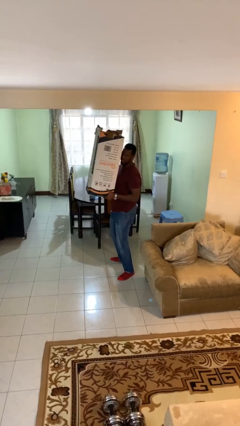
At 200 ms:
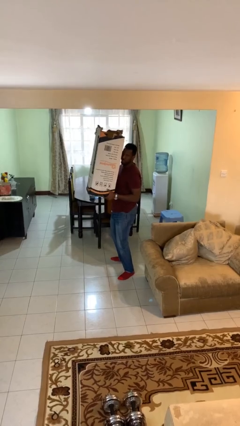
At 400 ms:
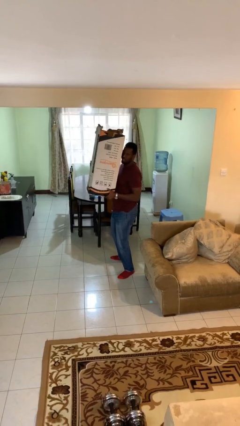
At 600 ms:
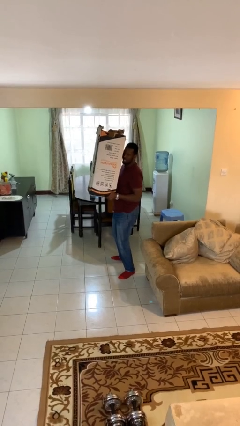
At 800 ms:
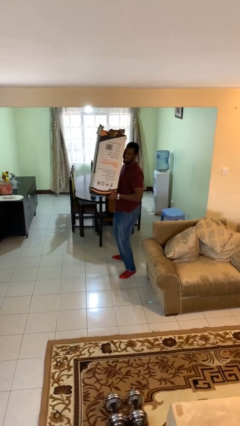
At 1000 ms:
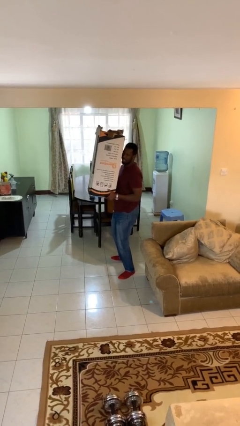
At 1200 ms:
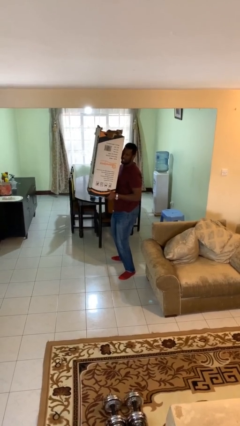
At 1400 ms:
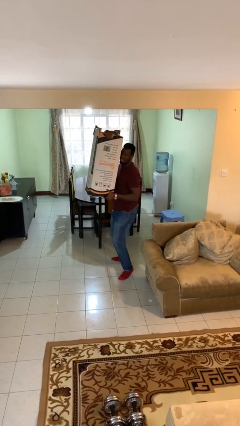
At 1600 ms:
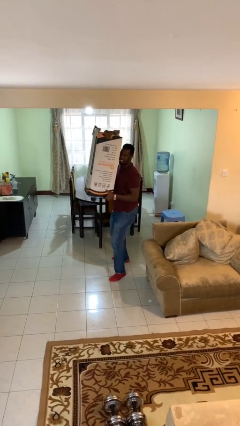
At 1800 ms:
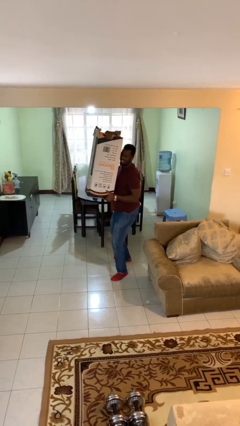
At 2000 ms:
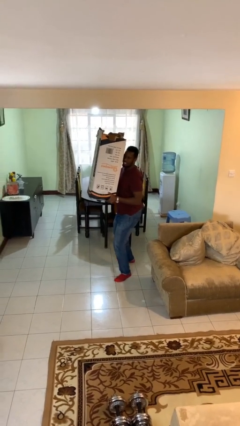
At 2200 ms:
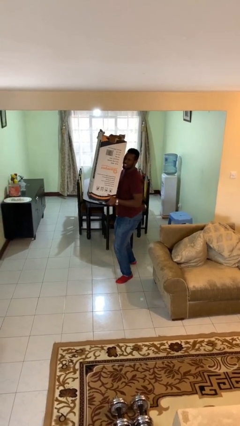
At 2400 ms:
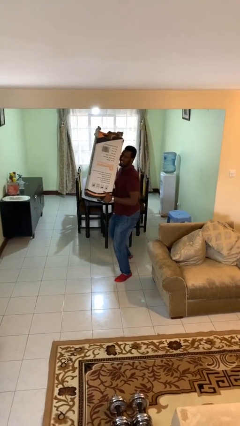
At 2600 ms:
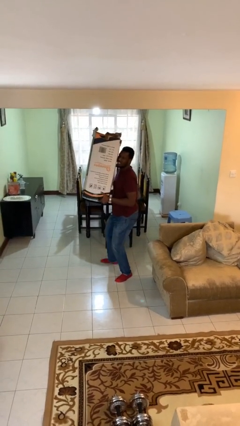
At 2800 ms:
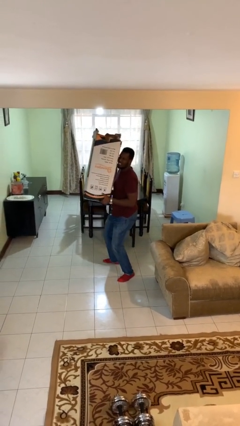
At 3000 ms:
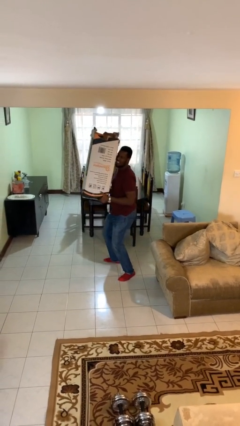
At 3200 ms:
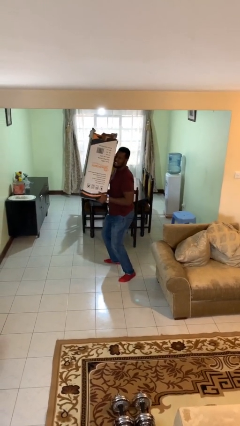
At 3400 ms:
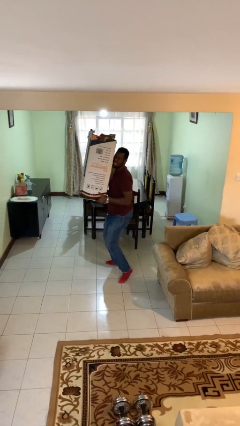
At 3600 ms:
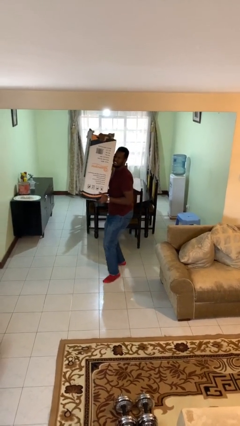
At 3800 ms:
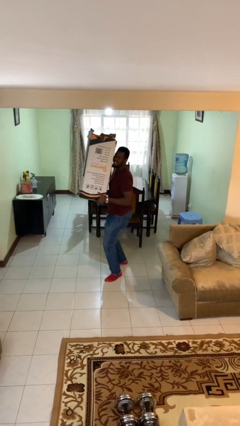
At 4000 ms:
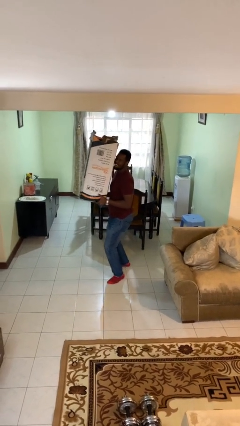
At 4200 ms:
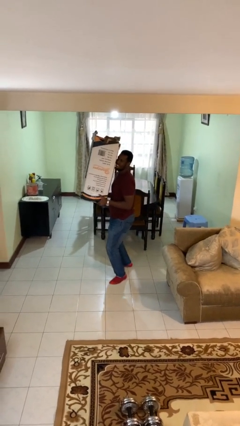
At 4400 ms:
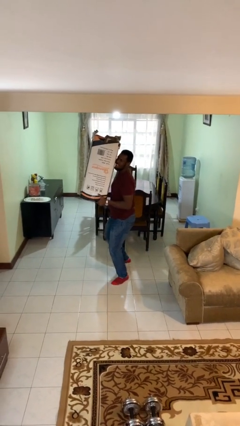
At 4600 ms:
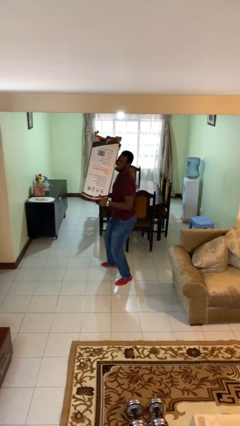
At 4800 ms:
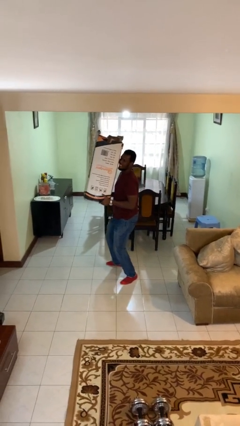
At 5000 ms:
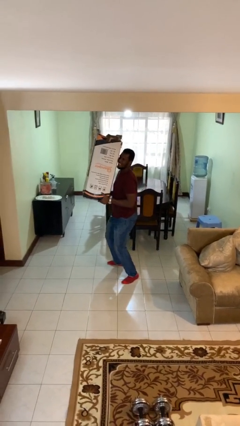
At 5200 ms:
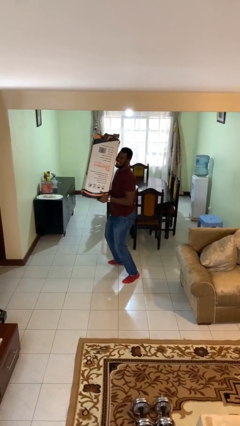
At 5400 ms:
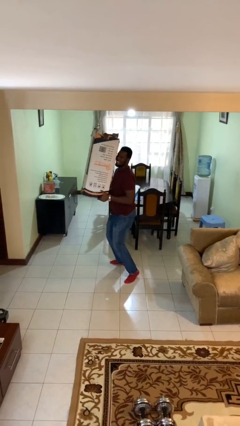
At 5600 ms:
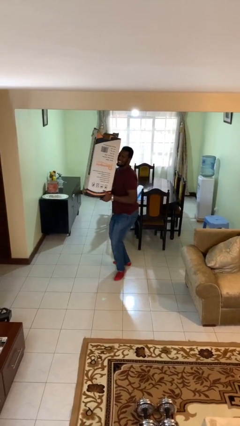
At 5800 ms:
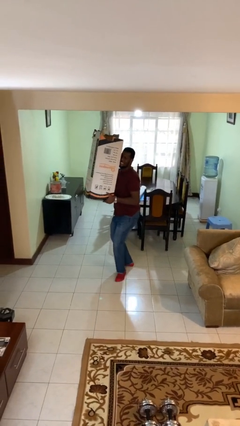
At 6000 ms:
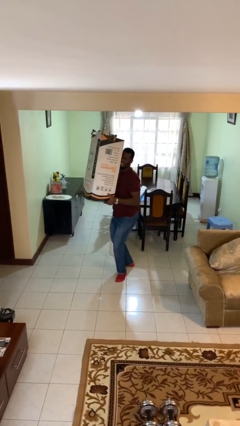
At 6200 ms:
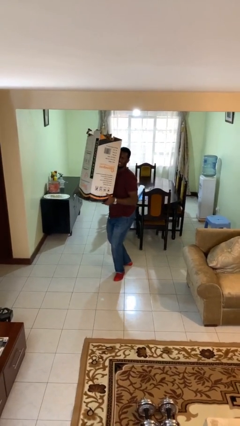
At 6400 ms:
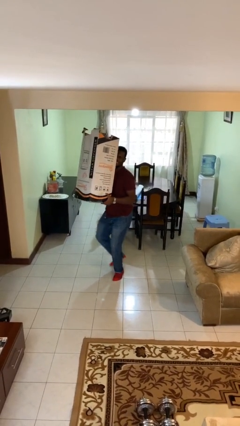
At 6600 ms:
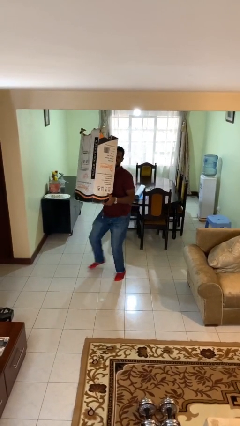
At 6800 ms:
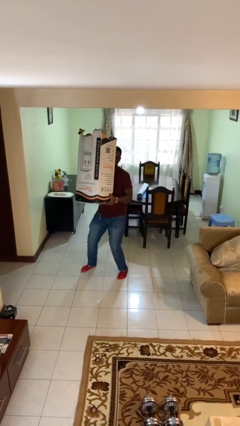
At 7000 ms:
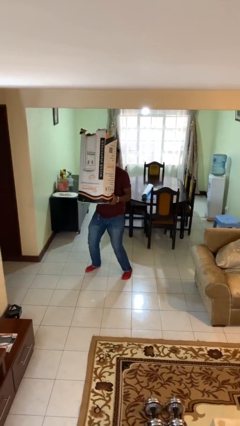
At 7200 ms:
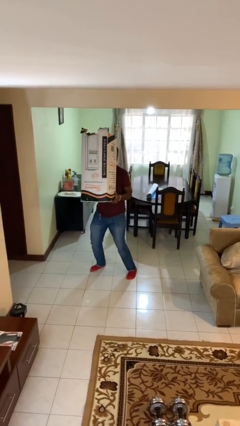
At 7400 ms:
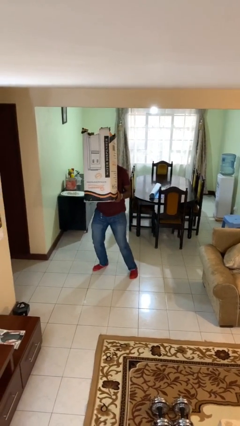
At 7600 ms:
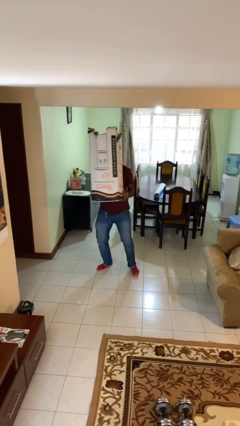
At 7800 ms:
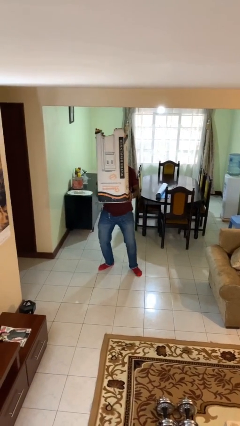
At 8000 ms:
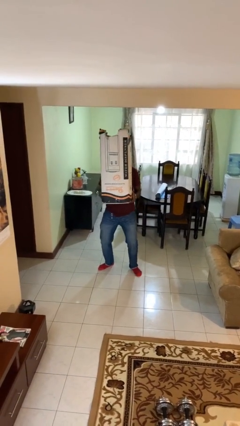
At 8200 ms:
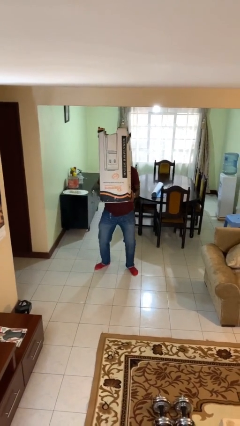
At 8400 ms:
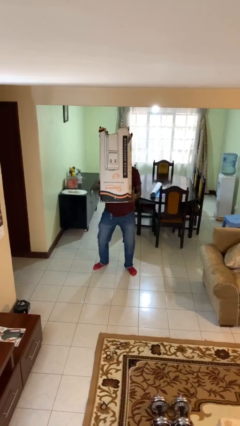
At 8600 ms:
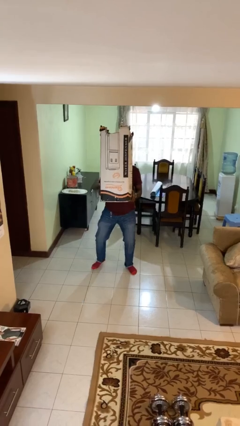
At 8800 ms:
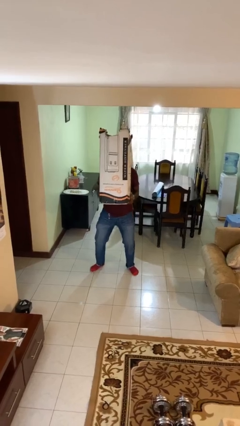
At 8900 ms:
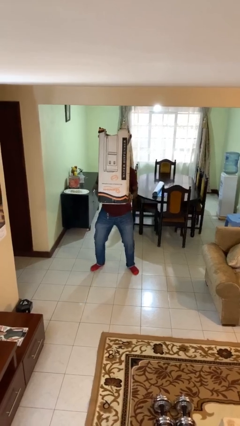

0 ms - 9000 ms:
person carries heavy object

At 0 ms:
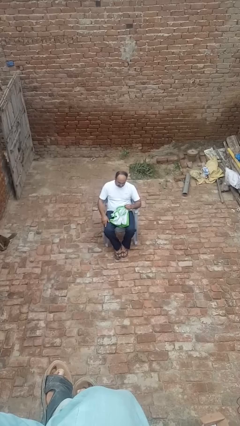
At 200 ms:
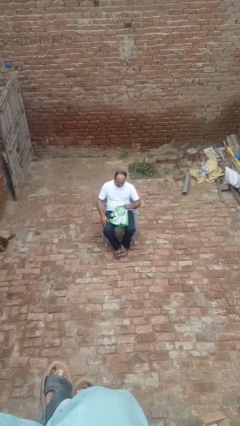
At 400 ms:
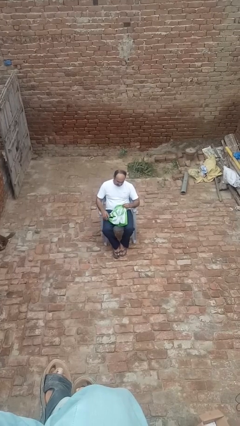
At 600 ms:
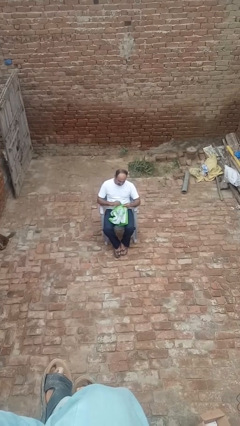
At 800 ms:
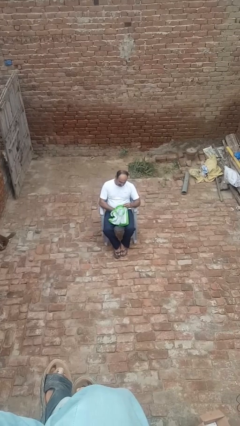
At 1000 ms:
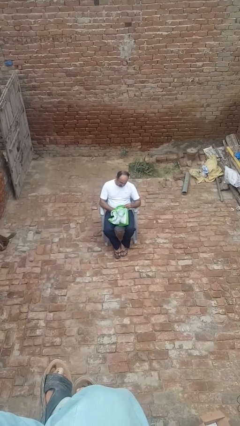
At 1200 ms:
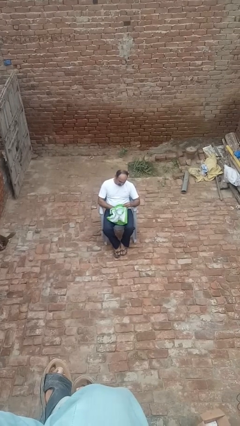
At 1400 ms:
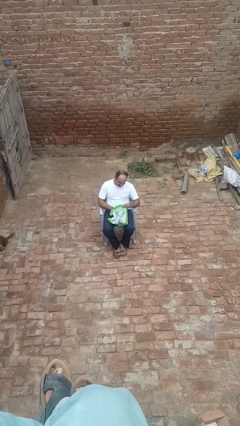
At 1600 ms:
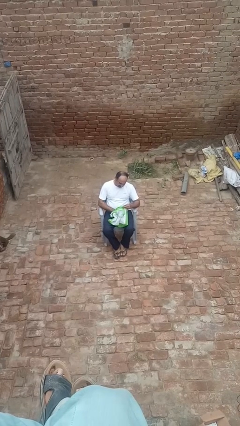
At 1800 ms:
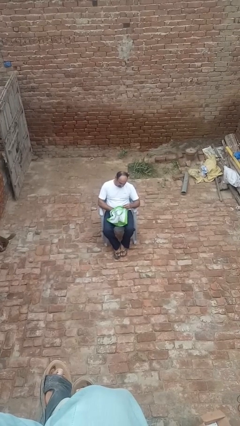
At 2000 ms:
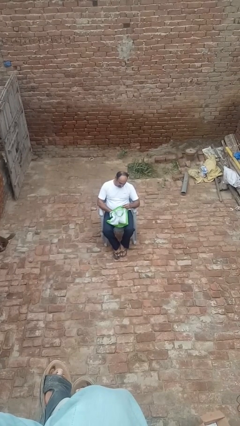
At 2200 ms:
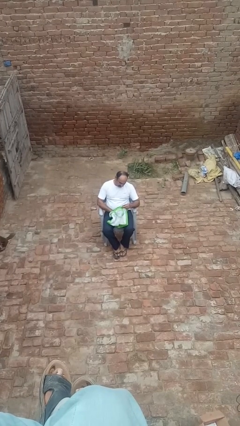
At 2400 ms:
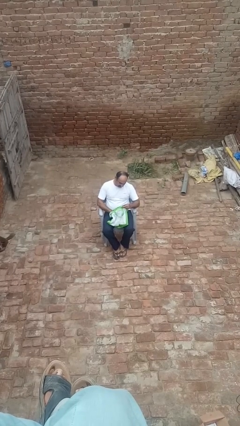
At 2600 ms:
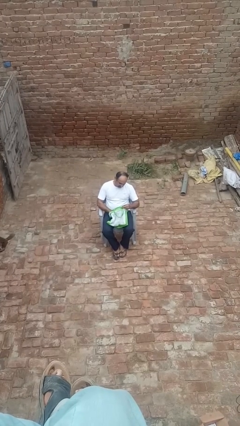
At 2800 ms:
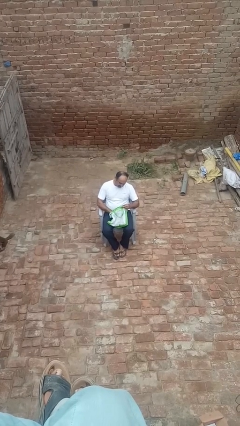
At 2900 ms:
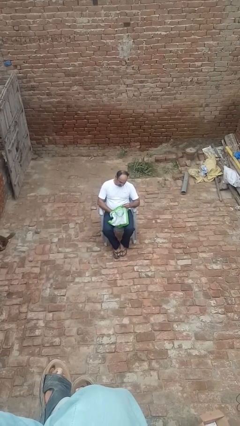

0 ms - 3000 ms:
person searches in bag

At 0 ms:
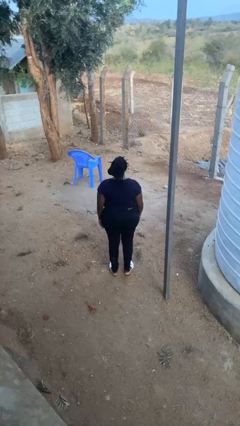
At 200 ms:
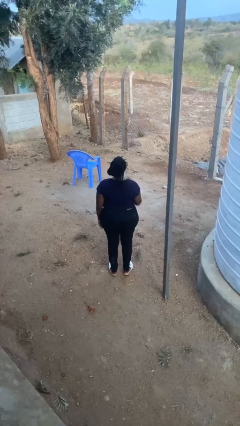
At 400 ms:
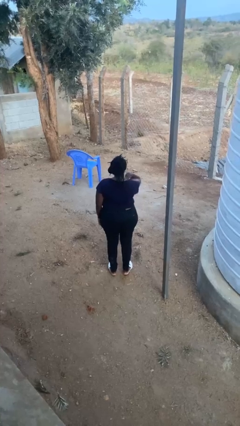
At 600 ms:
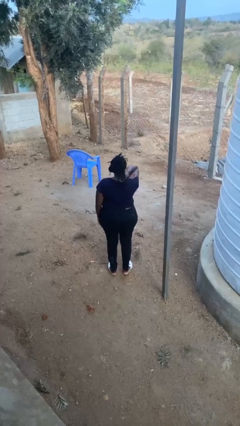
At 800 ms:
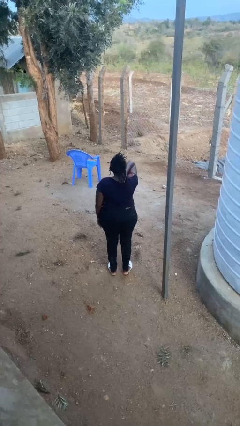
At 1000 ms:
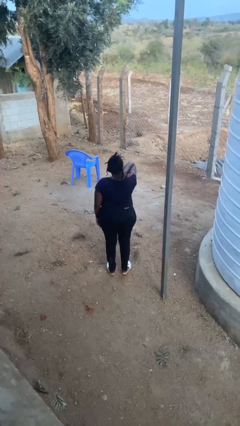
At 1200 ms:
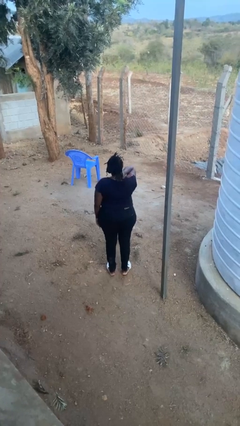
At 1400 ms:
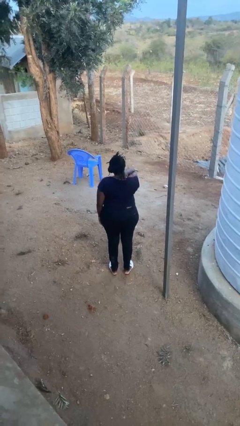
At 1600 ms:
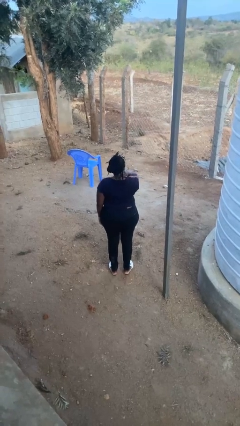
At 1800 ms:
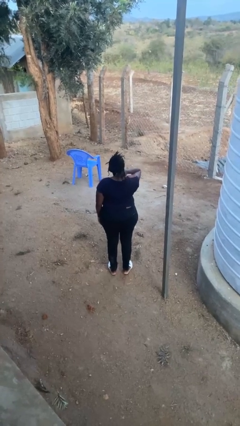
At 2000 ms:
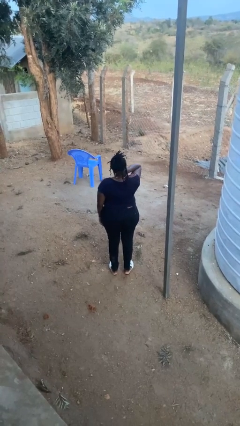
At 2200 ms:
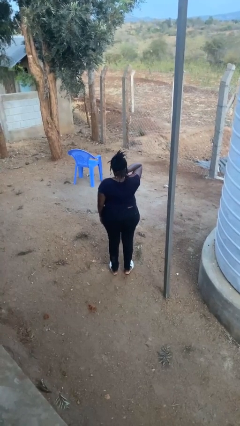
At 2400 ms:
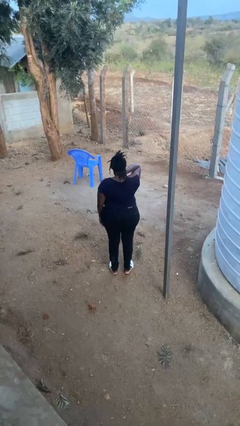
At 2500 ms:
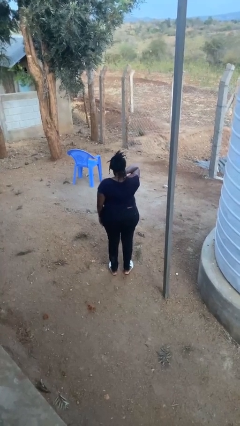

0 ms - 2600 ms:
person rubs neck

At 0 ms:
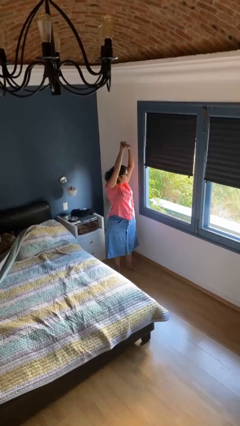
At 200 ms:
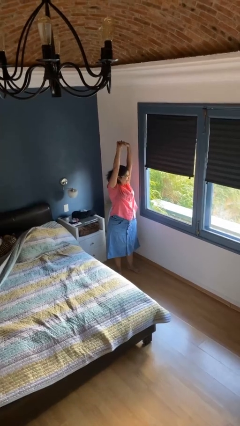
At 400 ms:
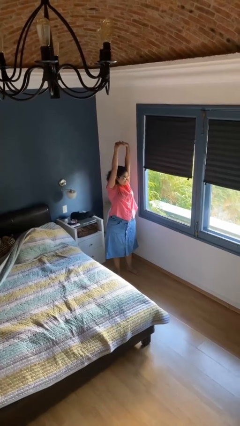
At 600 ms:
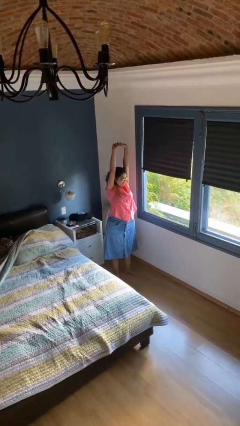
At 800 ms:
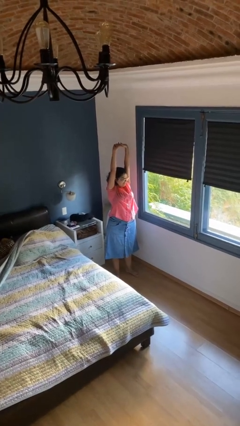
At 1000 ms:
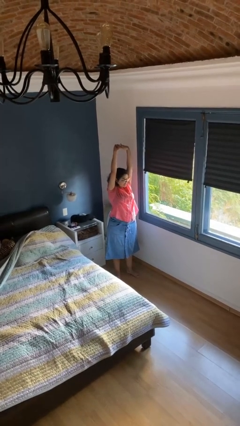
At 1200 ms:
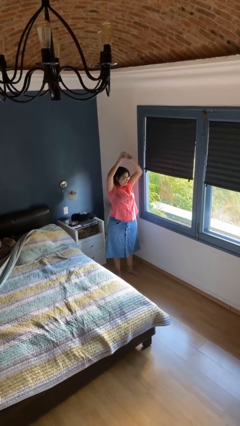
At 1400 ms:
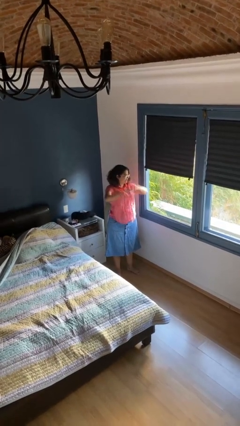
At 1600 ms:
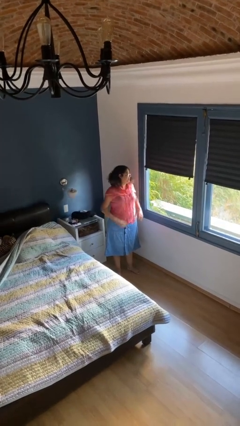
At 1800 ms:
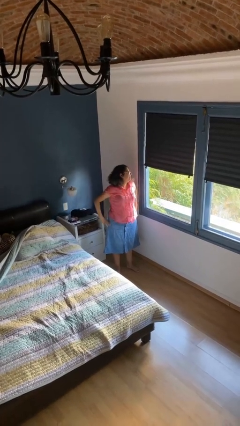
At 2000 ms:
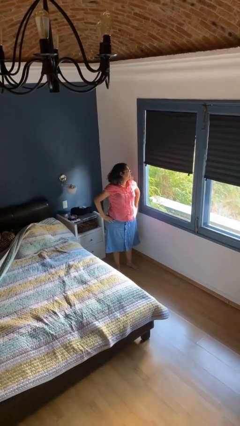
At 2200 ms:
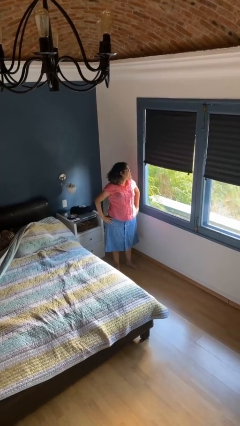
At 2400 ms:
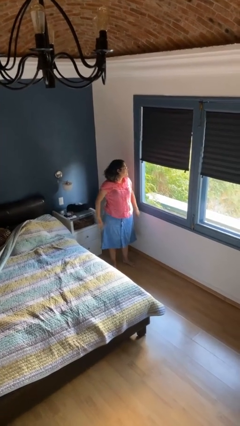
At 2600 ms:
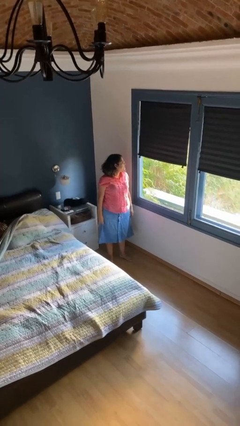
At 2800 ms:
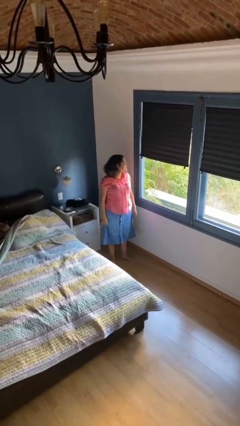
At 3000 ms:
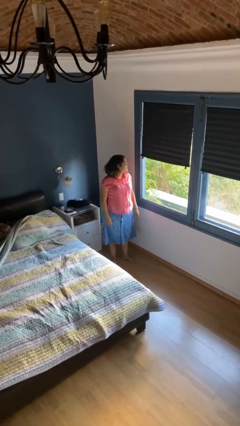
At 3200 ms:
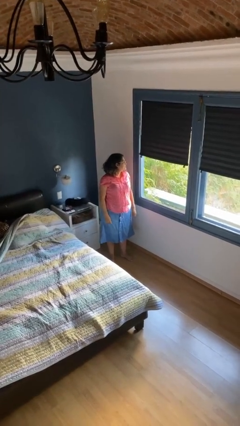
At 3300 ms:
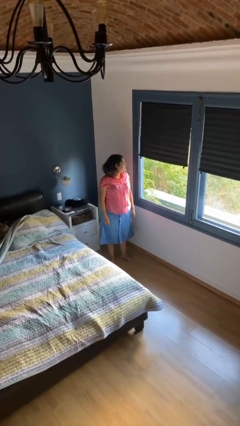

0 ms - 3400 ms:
person stretches arms over head
